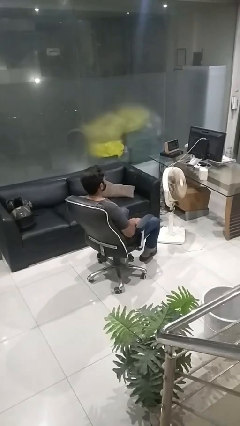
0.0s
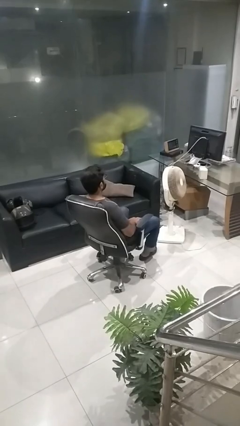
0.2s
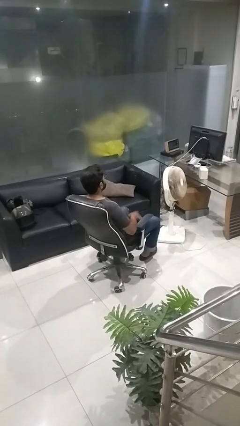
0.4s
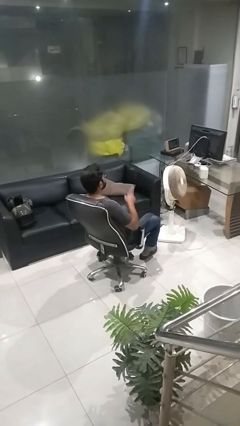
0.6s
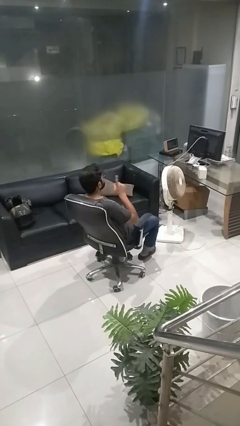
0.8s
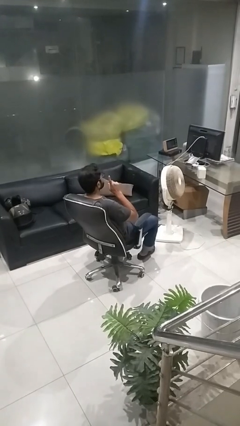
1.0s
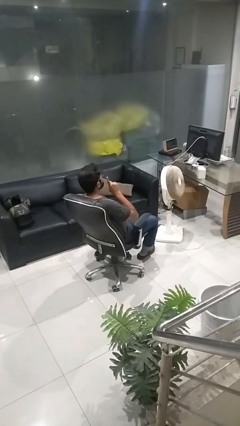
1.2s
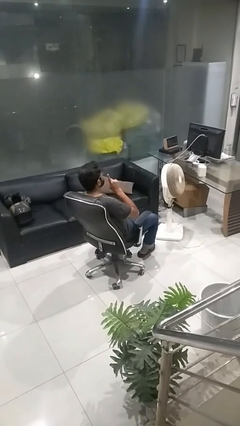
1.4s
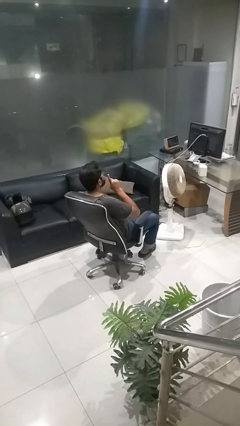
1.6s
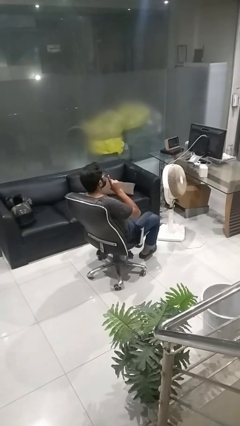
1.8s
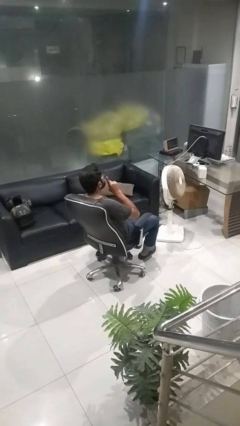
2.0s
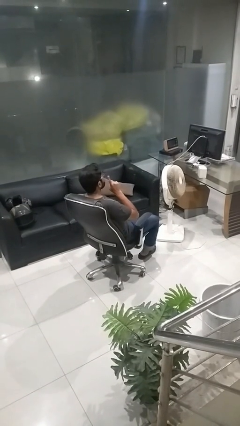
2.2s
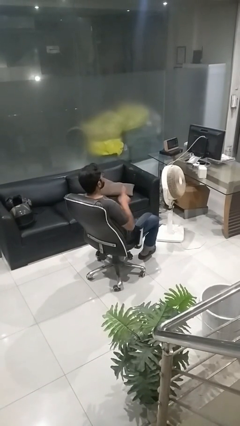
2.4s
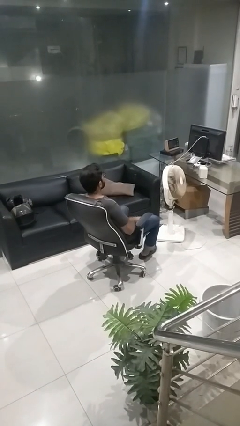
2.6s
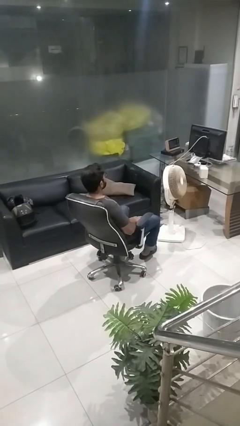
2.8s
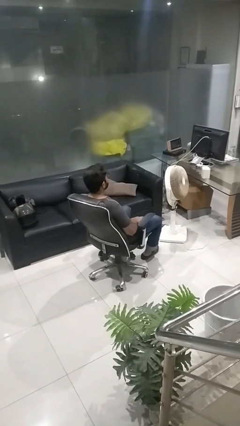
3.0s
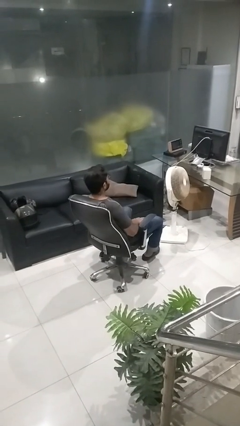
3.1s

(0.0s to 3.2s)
person gestures be quiet

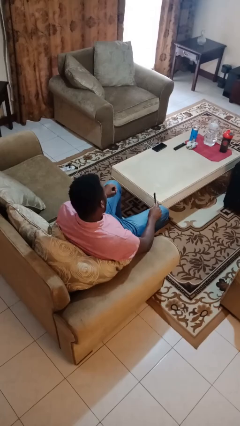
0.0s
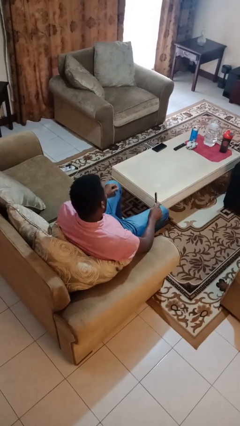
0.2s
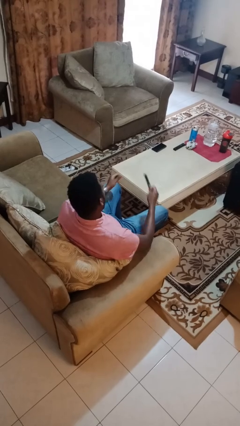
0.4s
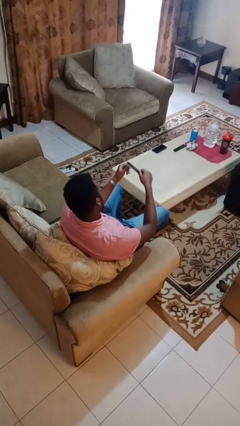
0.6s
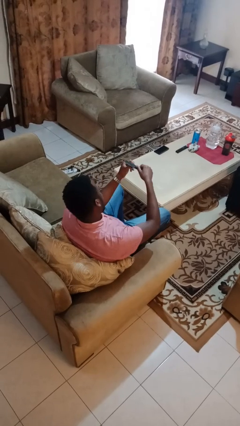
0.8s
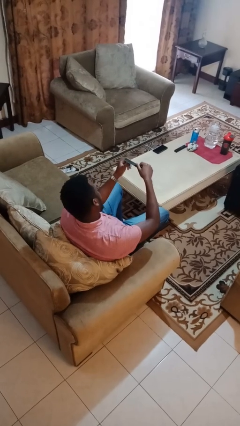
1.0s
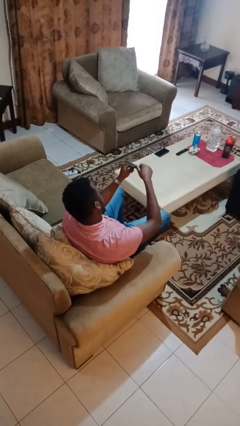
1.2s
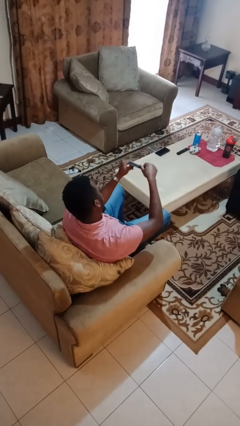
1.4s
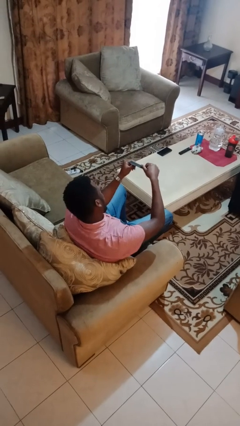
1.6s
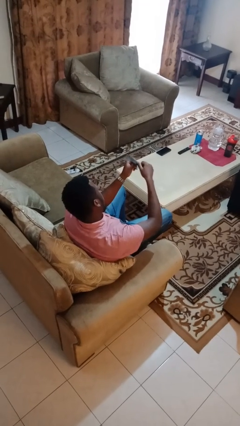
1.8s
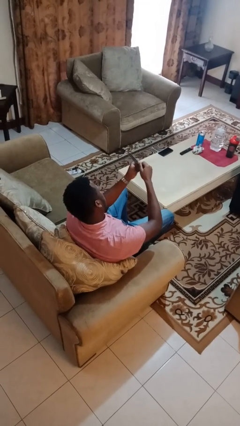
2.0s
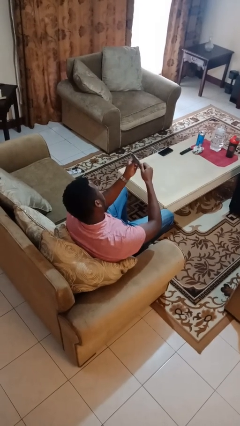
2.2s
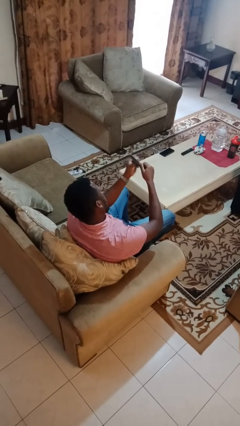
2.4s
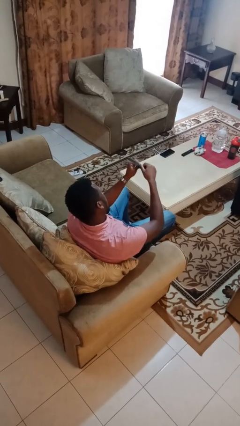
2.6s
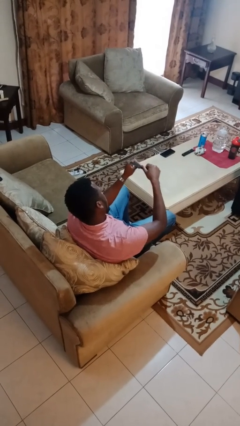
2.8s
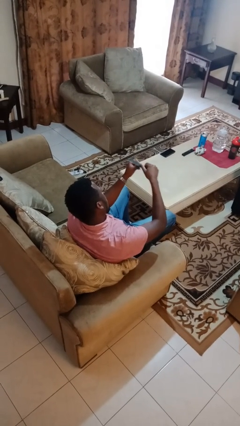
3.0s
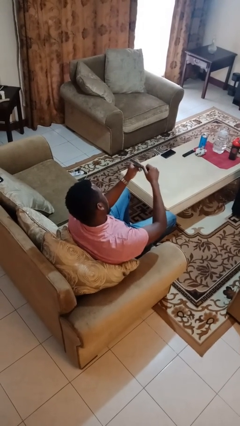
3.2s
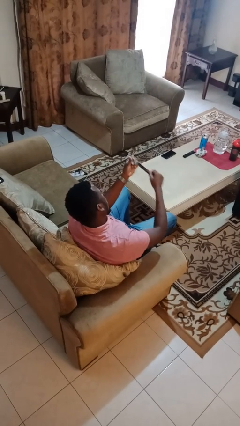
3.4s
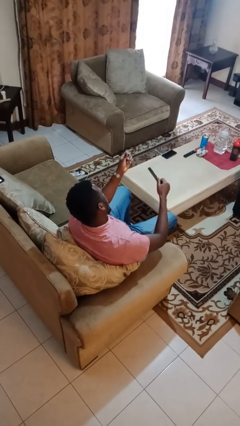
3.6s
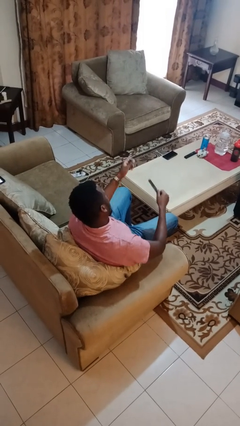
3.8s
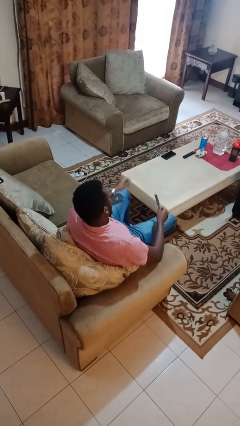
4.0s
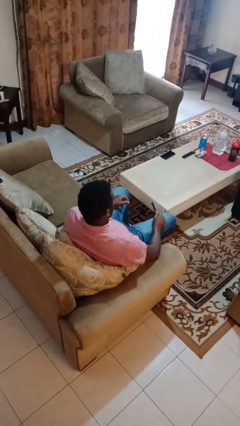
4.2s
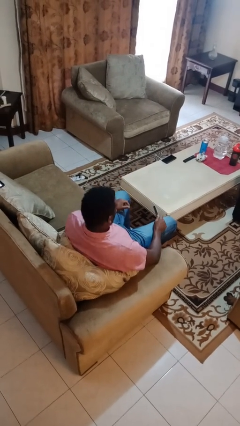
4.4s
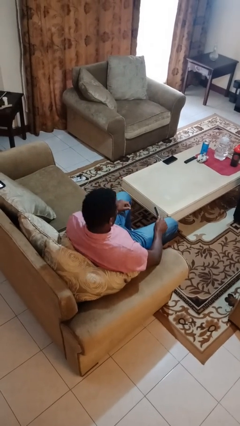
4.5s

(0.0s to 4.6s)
person files fingernails

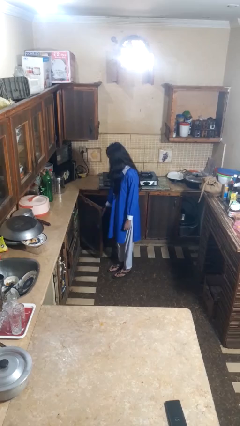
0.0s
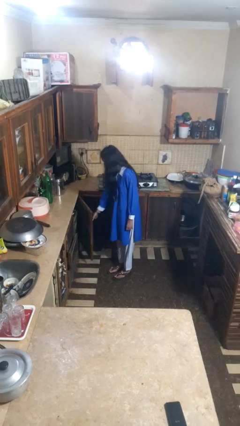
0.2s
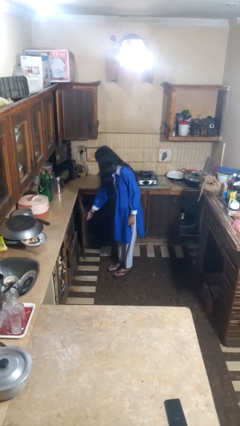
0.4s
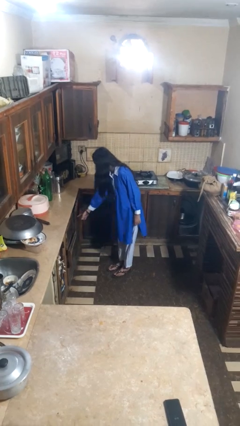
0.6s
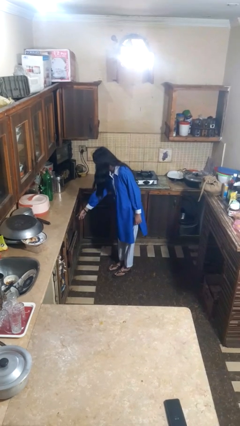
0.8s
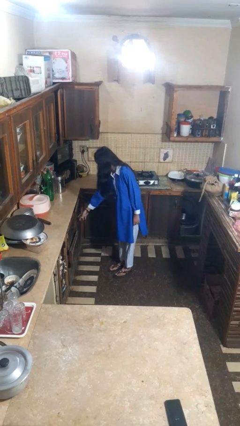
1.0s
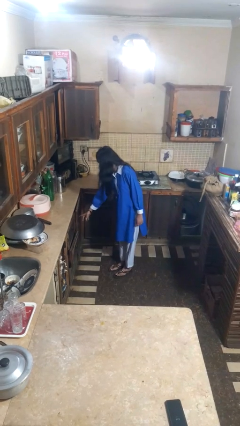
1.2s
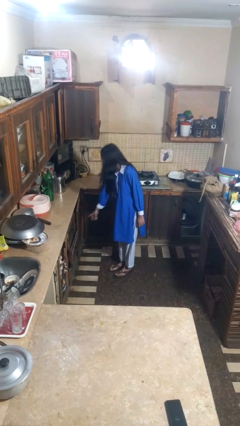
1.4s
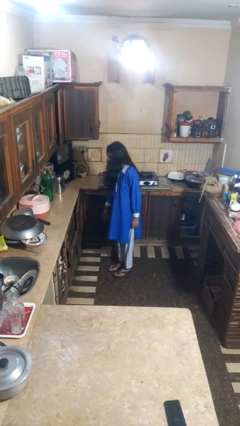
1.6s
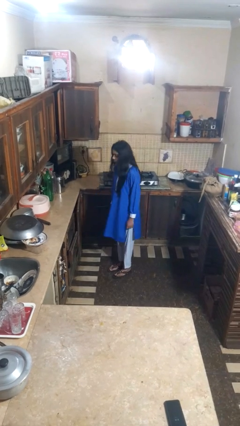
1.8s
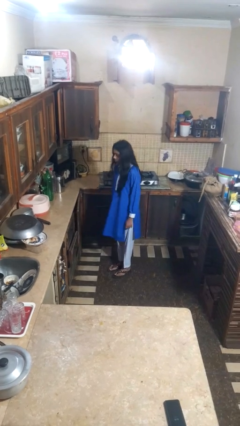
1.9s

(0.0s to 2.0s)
person closes closet door

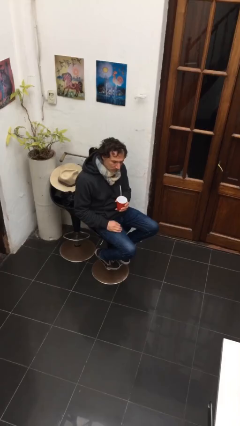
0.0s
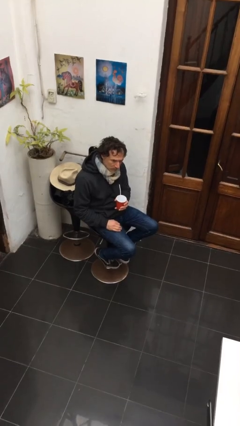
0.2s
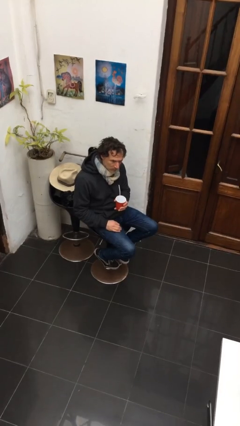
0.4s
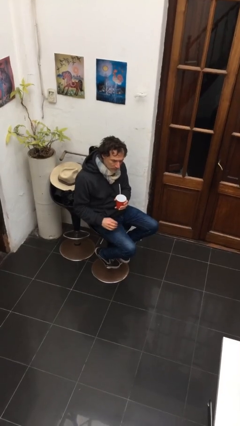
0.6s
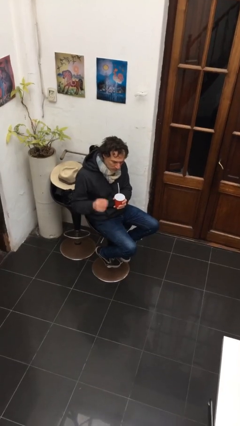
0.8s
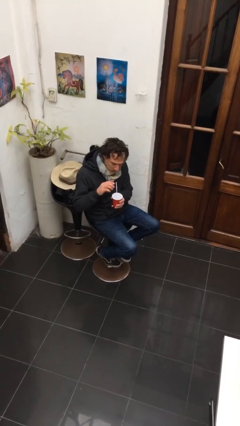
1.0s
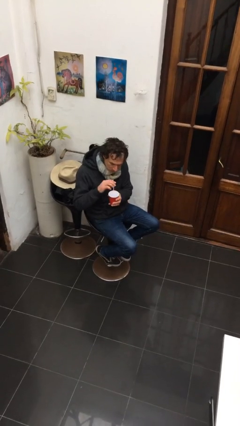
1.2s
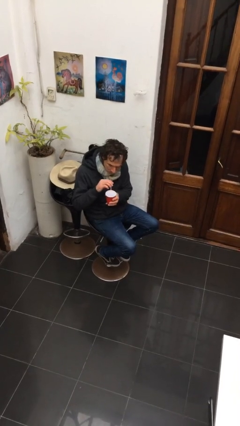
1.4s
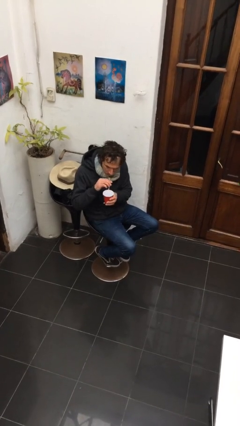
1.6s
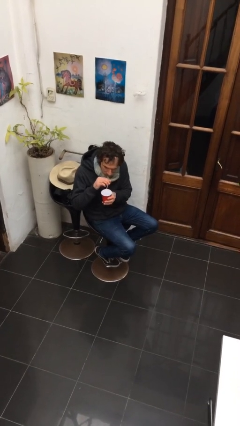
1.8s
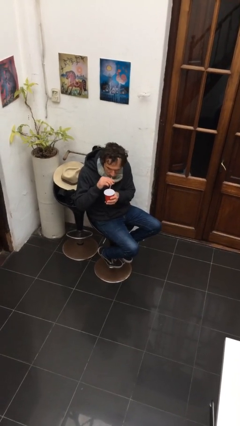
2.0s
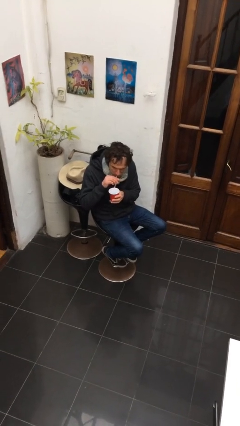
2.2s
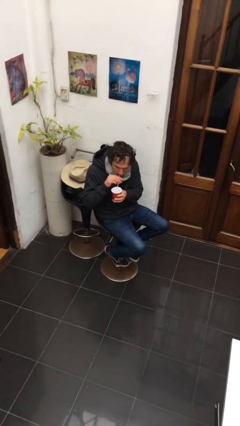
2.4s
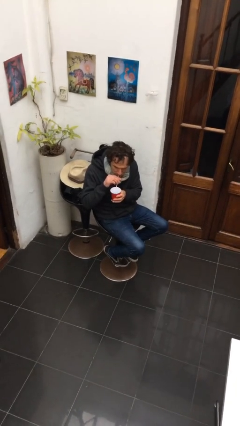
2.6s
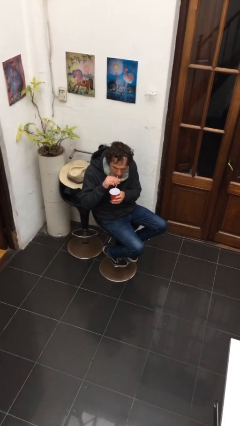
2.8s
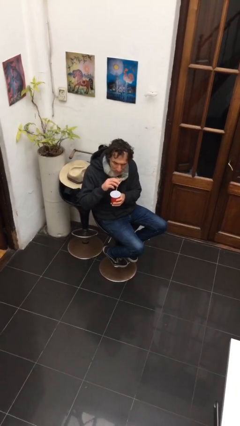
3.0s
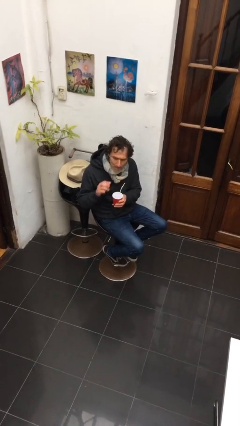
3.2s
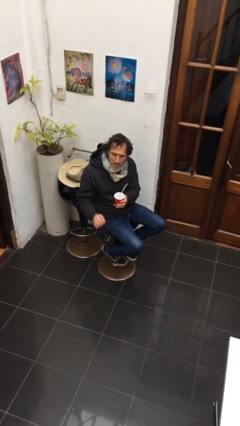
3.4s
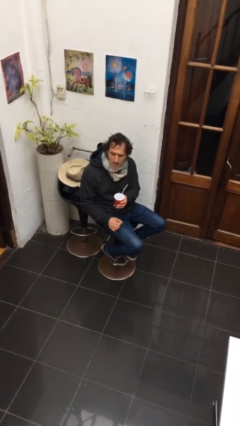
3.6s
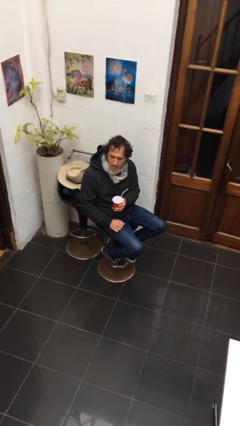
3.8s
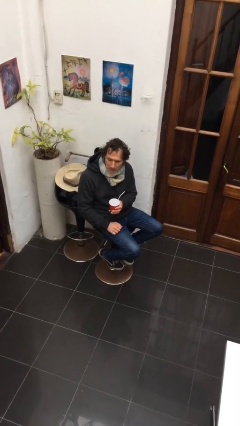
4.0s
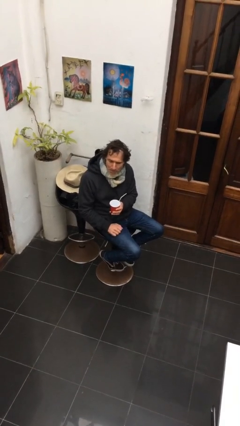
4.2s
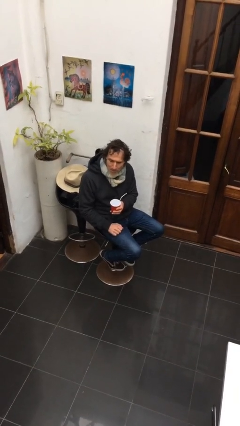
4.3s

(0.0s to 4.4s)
person drinks from straw

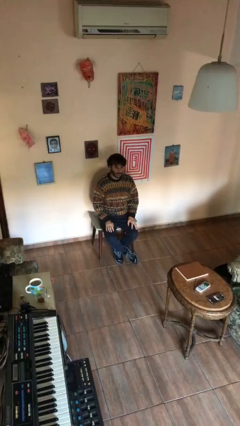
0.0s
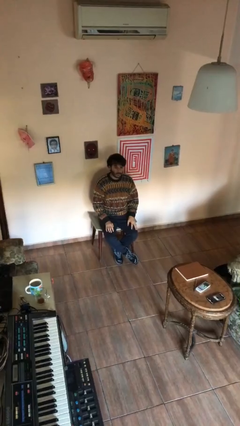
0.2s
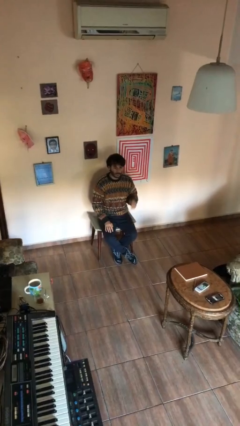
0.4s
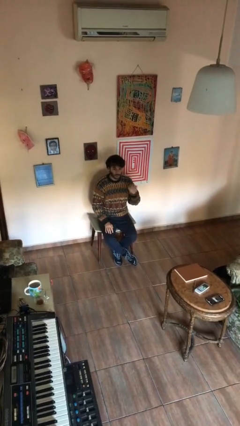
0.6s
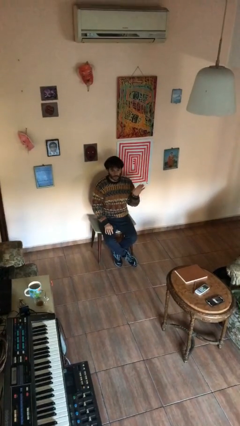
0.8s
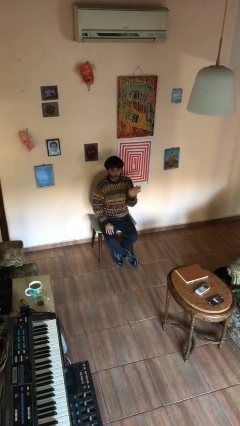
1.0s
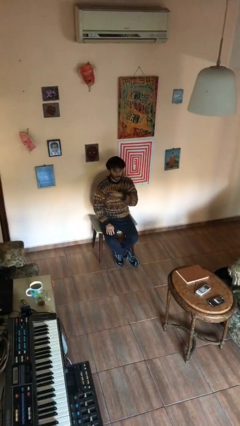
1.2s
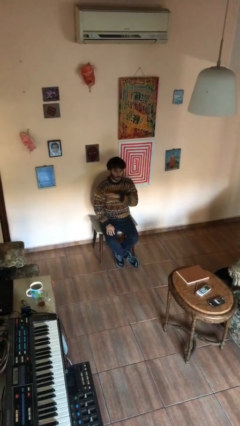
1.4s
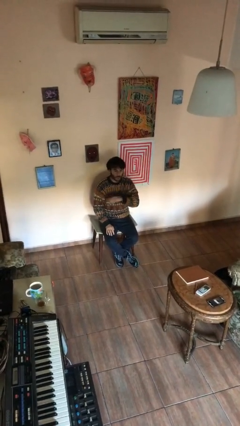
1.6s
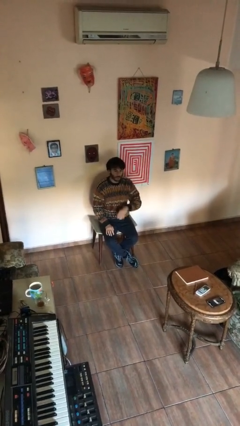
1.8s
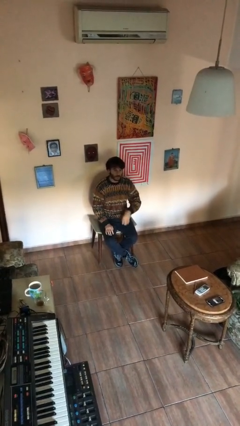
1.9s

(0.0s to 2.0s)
person gestures swipe right

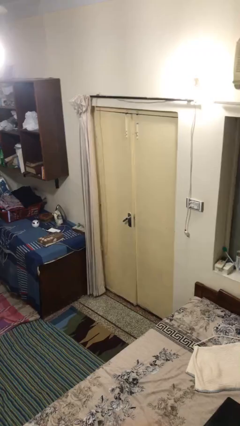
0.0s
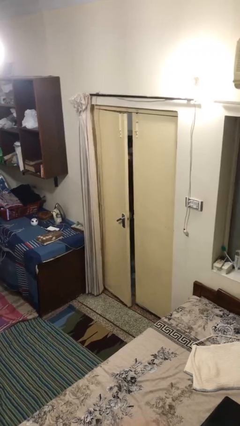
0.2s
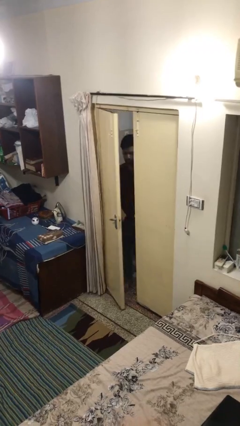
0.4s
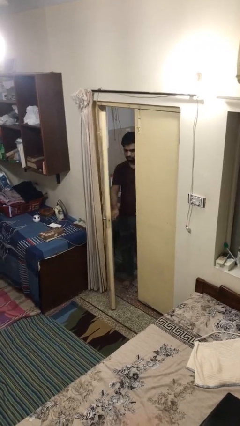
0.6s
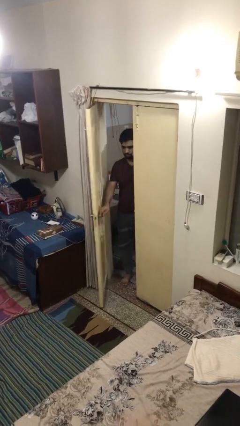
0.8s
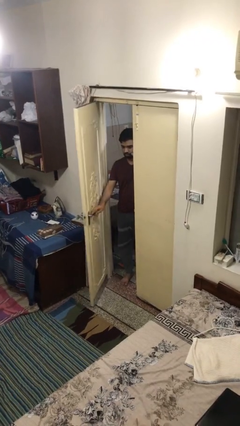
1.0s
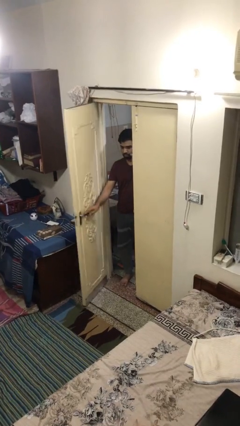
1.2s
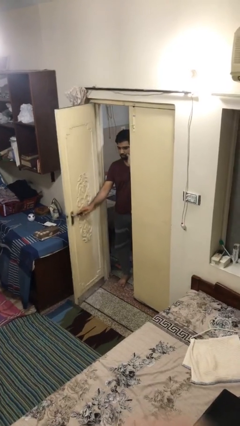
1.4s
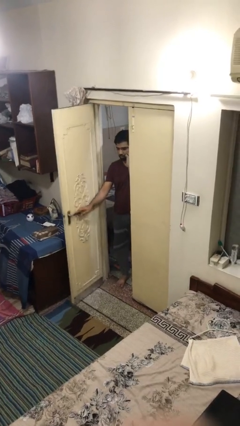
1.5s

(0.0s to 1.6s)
person opens facility door

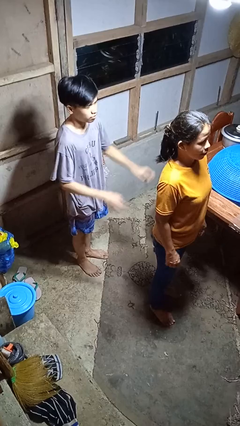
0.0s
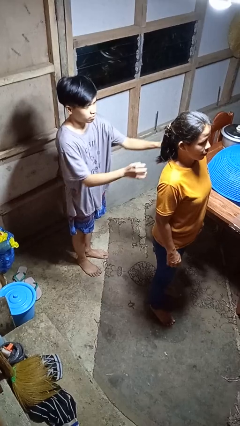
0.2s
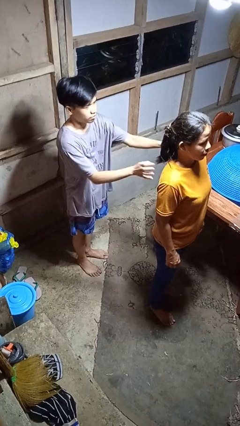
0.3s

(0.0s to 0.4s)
person grabs person by shoulder
